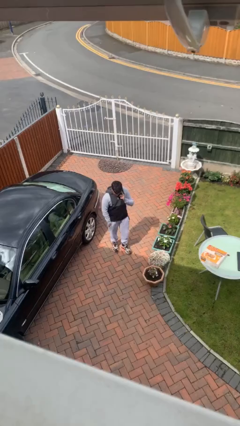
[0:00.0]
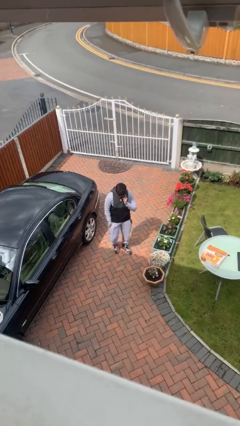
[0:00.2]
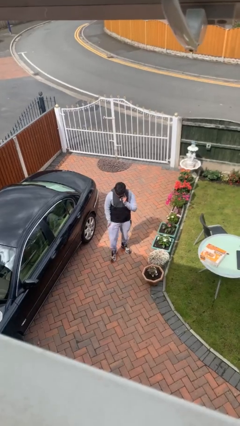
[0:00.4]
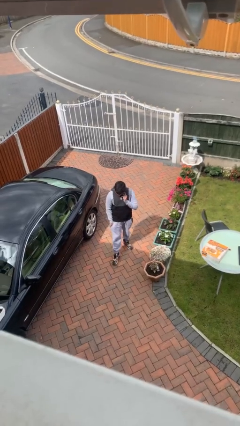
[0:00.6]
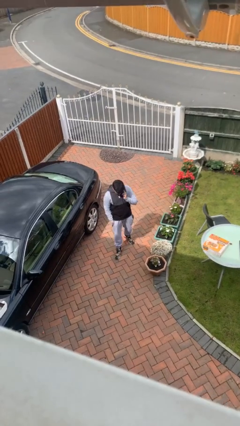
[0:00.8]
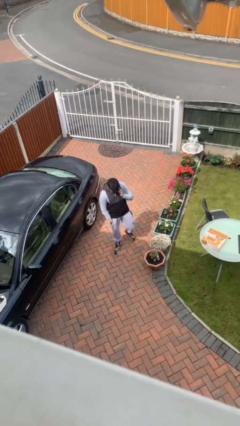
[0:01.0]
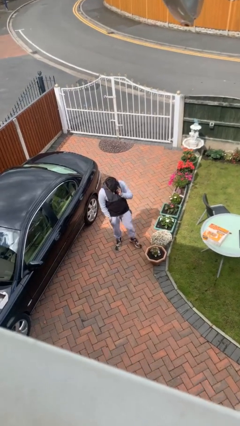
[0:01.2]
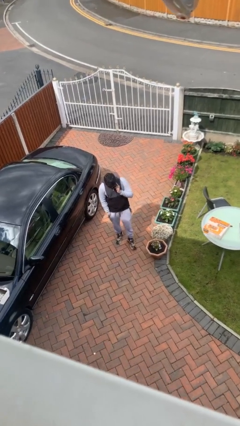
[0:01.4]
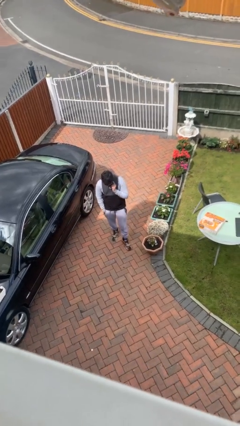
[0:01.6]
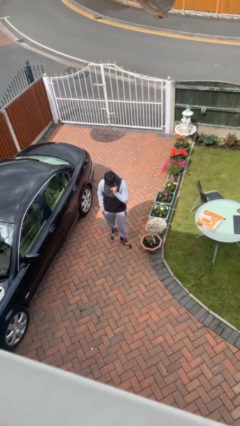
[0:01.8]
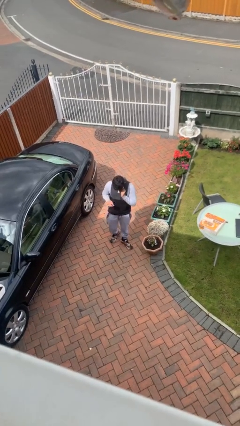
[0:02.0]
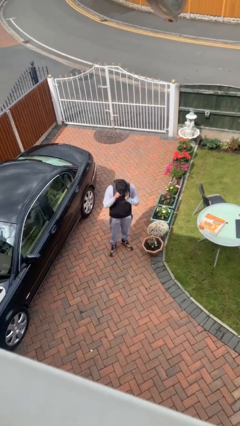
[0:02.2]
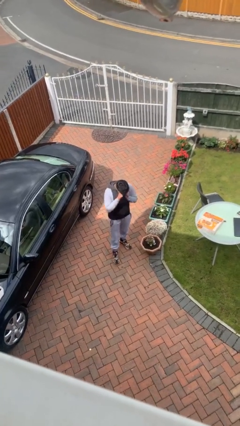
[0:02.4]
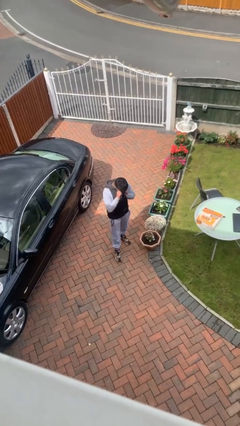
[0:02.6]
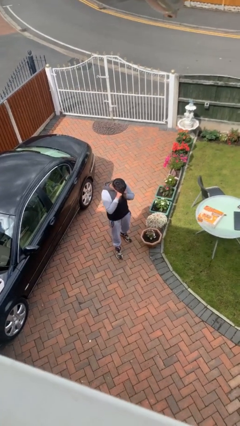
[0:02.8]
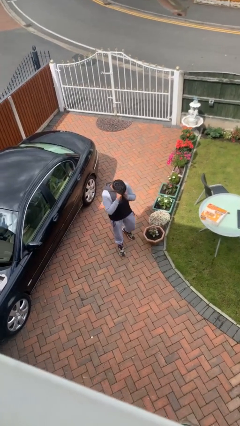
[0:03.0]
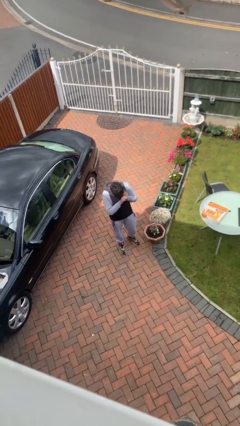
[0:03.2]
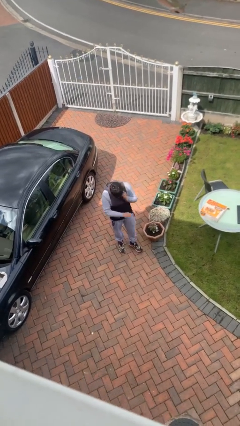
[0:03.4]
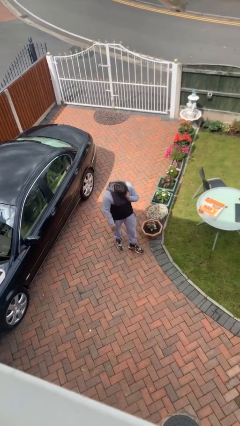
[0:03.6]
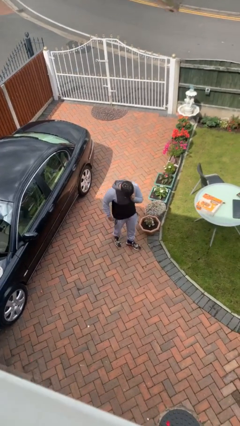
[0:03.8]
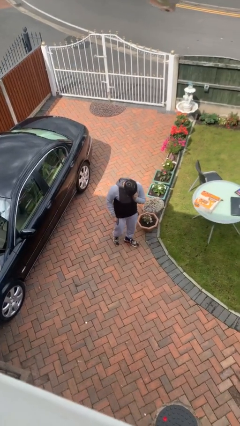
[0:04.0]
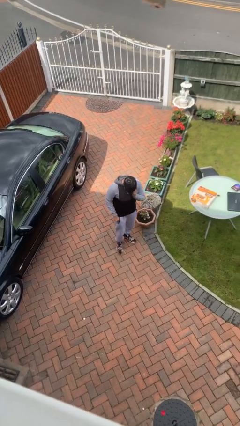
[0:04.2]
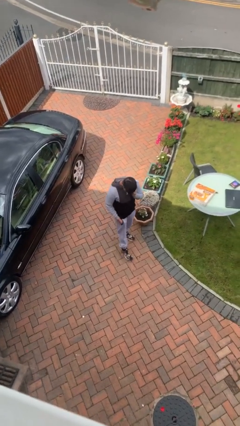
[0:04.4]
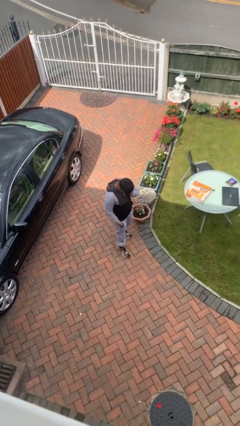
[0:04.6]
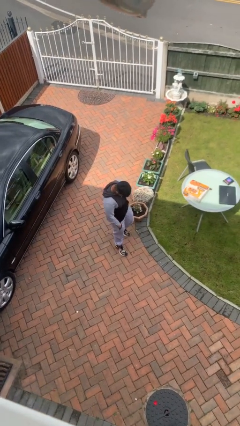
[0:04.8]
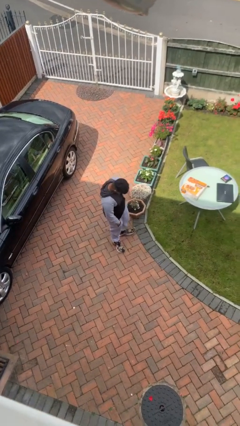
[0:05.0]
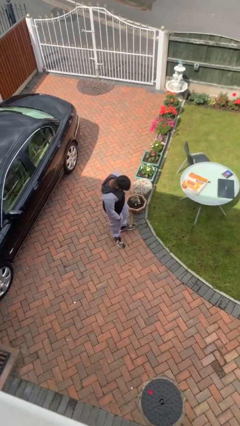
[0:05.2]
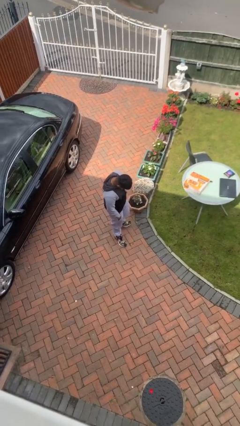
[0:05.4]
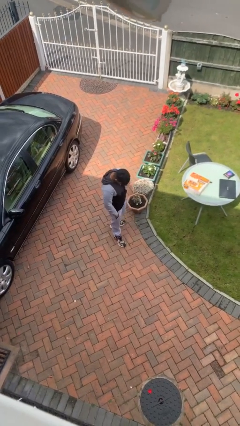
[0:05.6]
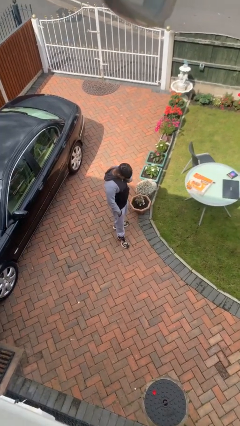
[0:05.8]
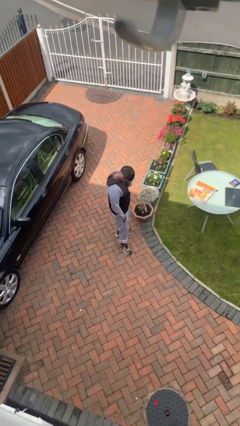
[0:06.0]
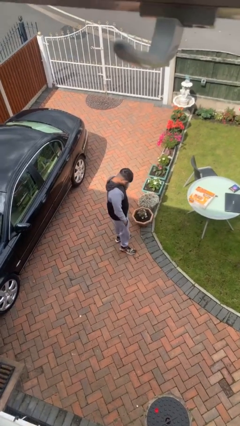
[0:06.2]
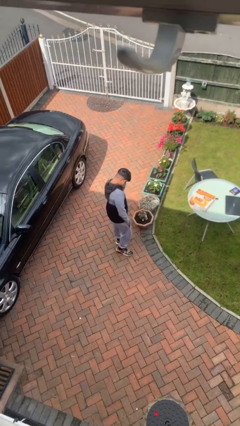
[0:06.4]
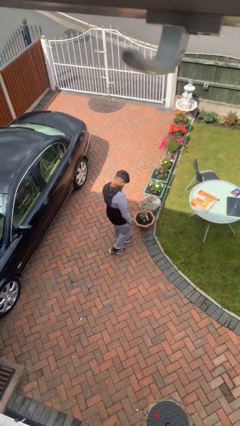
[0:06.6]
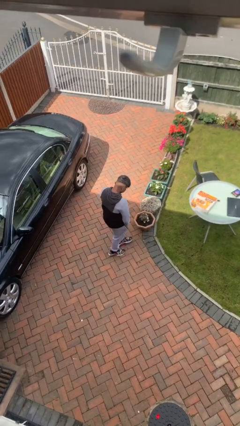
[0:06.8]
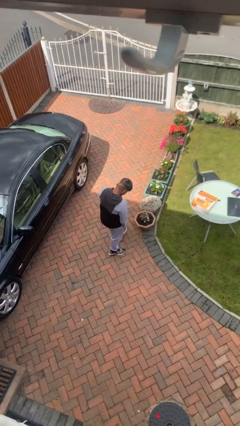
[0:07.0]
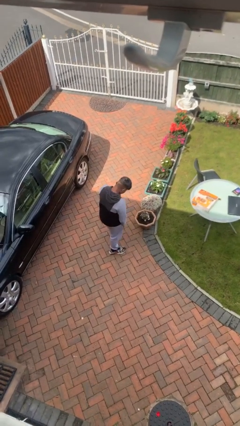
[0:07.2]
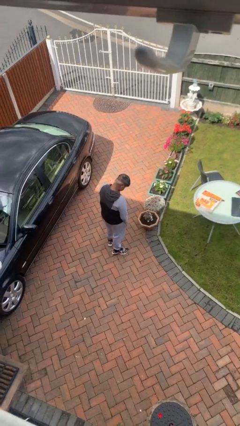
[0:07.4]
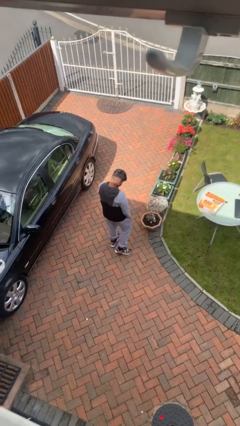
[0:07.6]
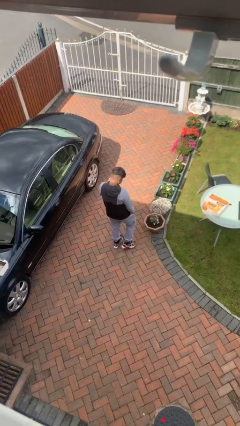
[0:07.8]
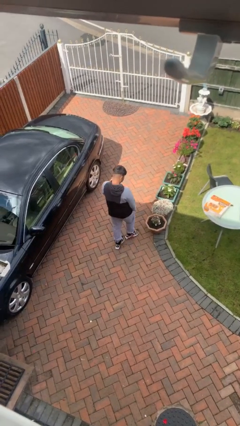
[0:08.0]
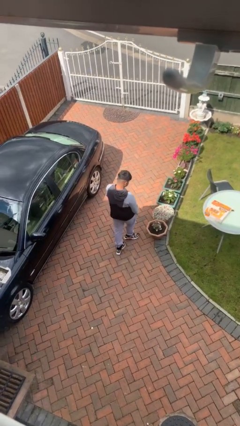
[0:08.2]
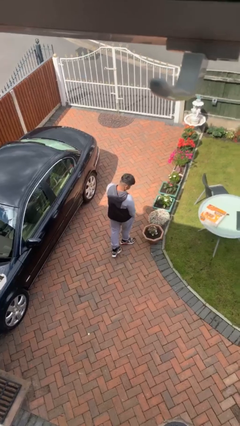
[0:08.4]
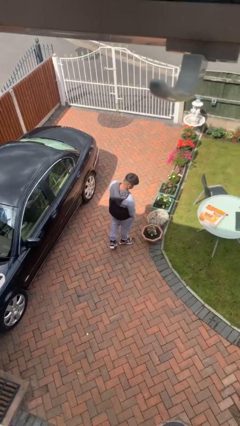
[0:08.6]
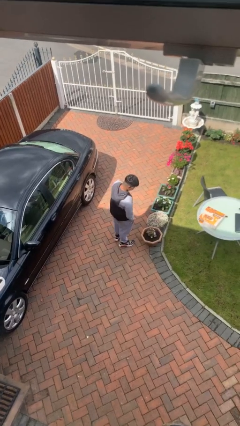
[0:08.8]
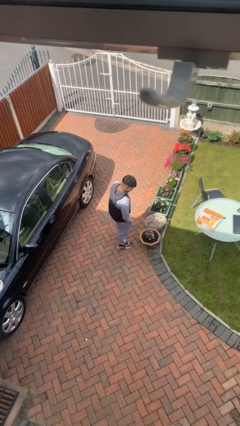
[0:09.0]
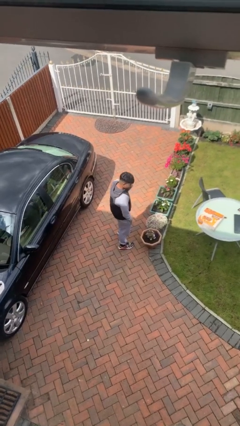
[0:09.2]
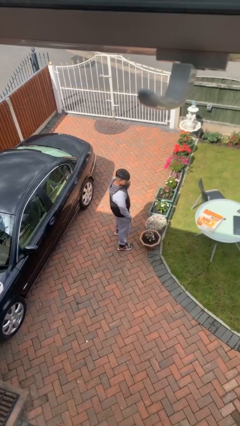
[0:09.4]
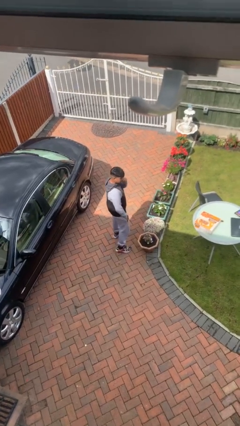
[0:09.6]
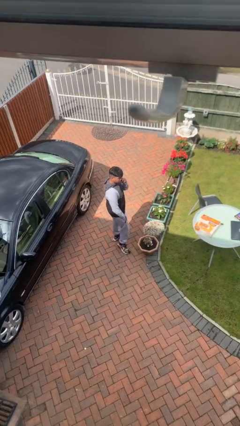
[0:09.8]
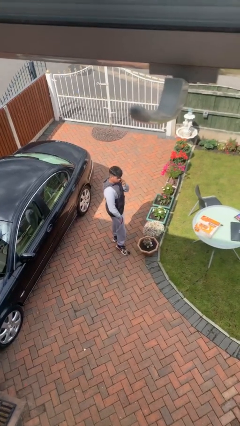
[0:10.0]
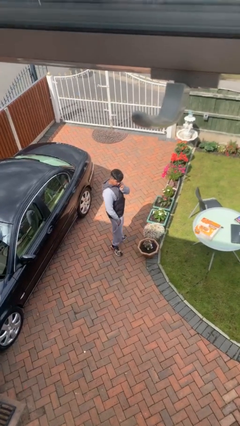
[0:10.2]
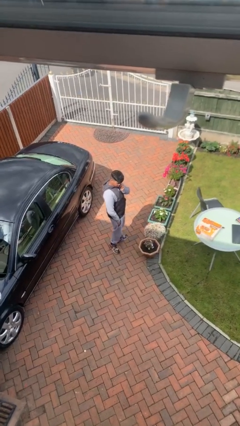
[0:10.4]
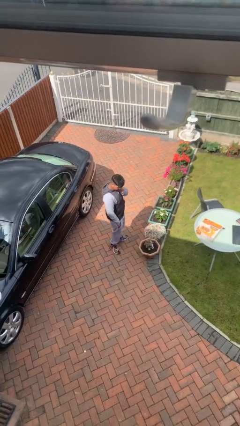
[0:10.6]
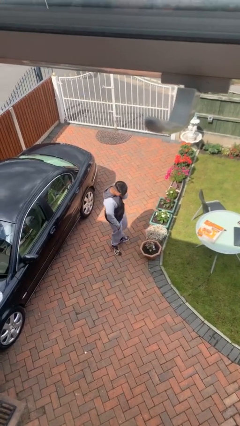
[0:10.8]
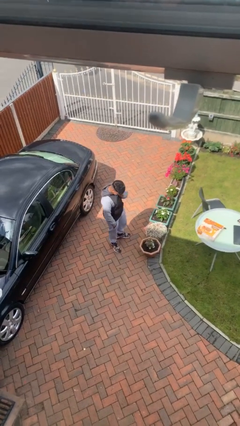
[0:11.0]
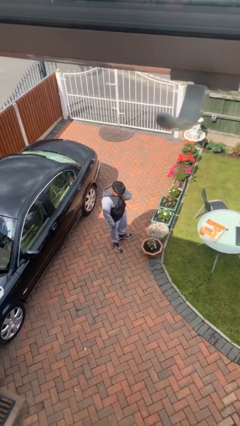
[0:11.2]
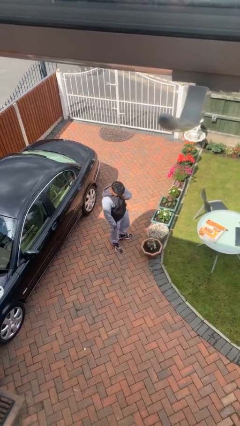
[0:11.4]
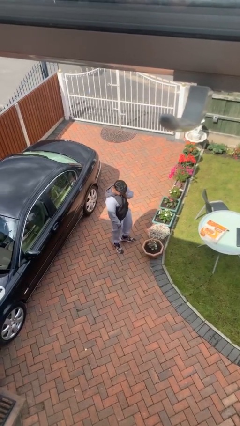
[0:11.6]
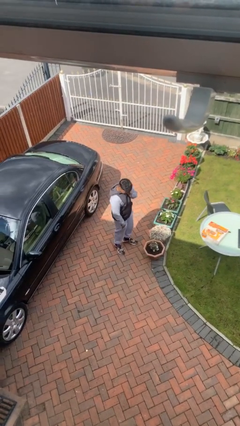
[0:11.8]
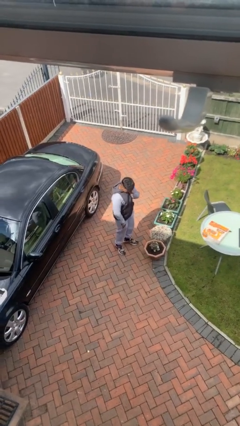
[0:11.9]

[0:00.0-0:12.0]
person talks on phone

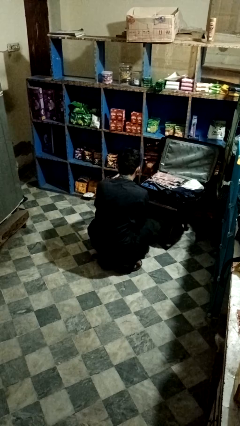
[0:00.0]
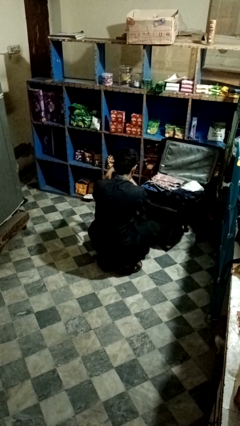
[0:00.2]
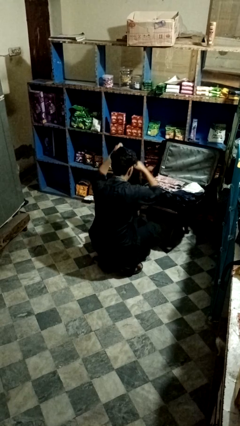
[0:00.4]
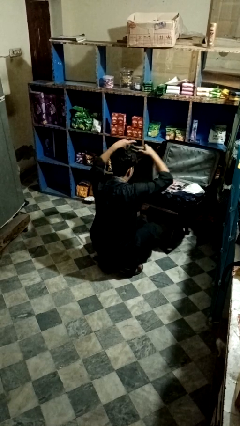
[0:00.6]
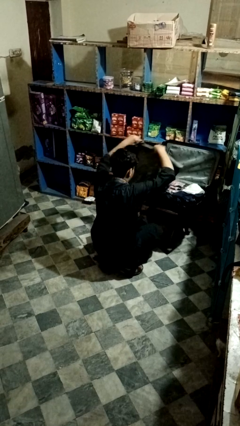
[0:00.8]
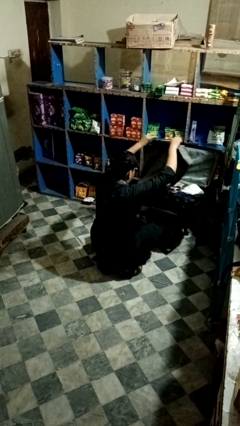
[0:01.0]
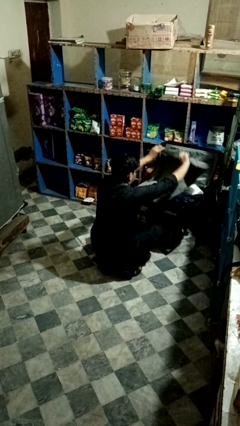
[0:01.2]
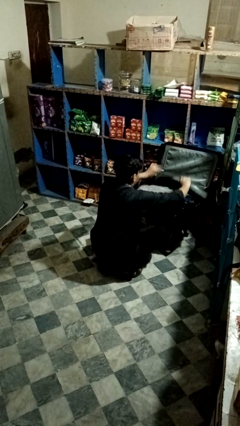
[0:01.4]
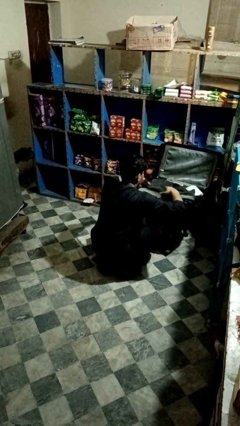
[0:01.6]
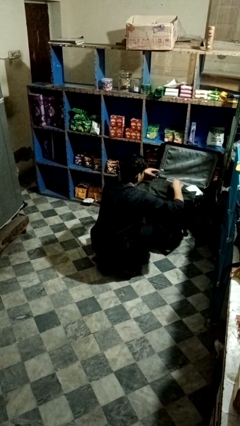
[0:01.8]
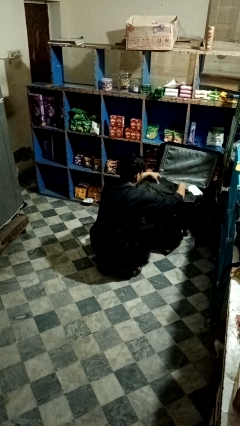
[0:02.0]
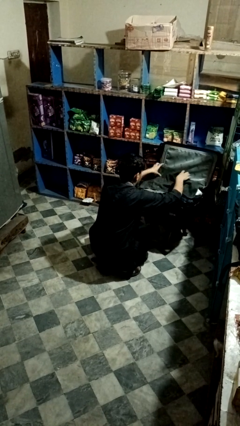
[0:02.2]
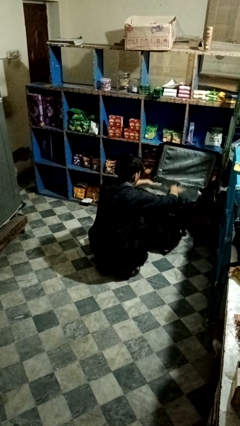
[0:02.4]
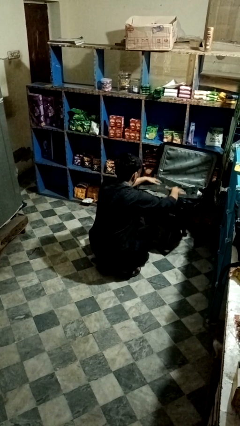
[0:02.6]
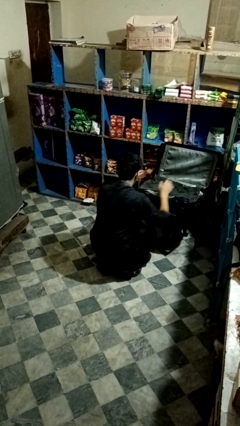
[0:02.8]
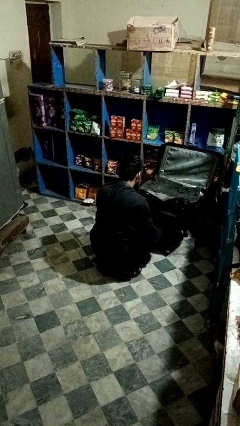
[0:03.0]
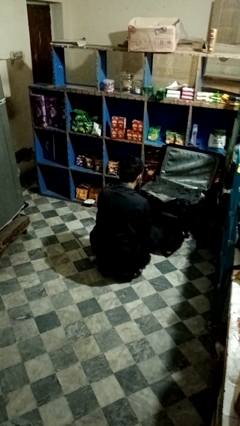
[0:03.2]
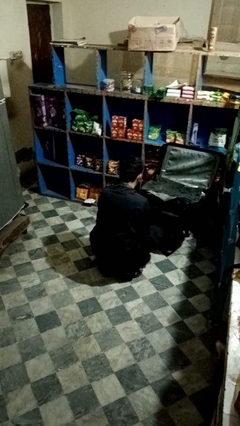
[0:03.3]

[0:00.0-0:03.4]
person loads clothes into suitcase

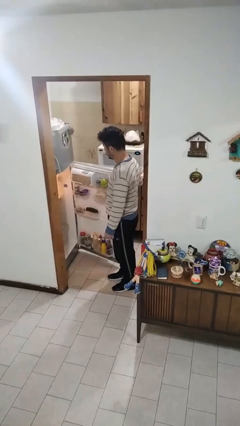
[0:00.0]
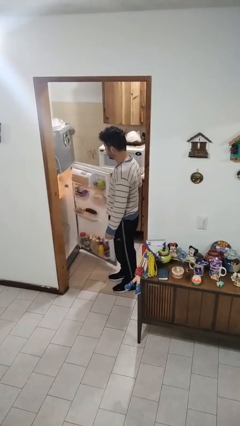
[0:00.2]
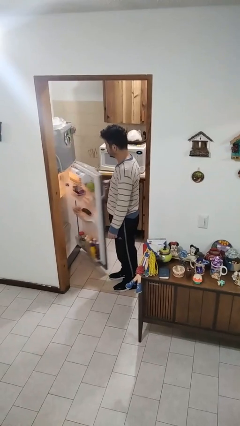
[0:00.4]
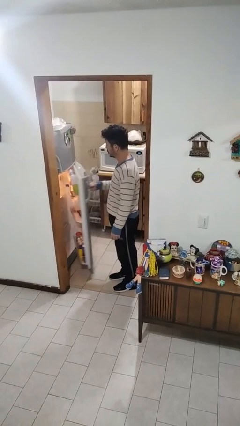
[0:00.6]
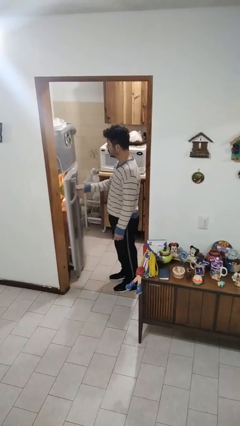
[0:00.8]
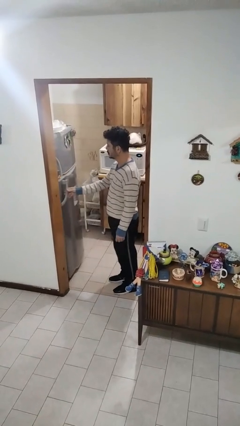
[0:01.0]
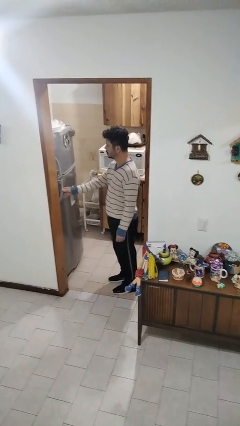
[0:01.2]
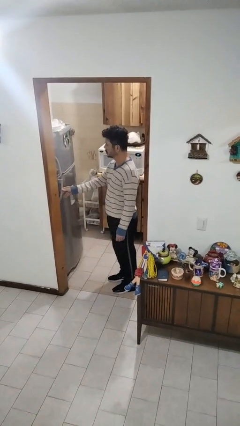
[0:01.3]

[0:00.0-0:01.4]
person closes refrigerator

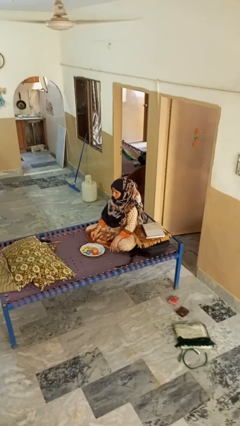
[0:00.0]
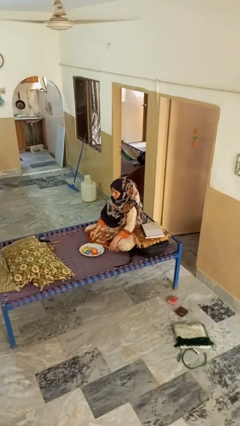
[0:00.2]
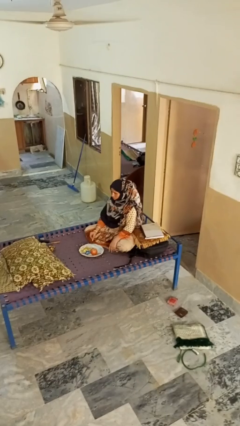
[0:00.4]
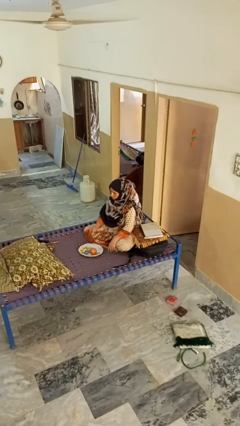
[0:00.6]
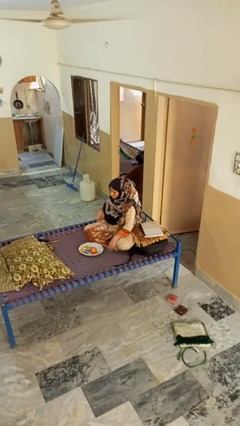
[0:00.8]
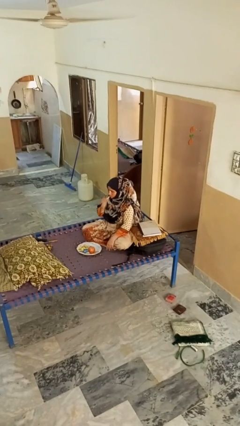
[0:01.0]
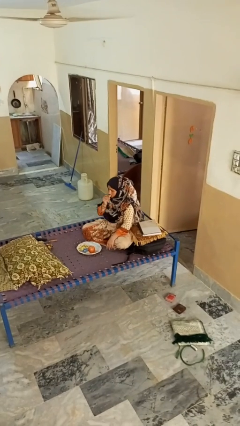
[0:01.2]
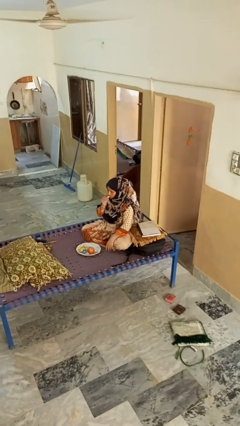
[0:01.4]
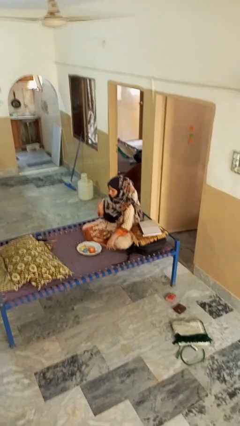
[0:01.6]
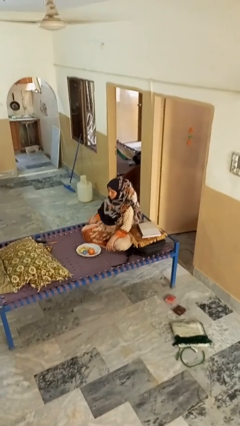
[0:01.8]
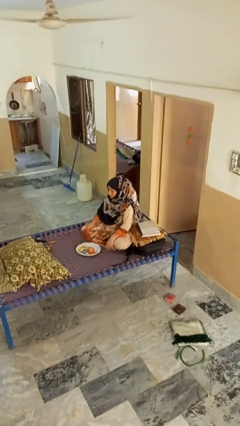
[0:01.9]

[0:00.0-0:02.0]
person eats apple
